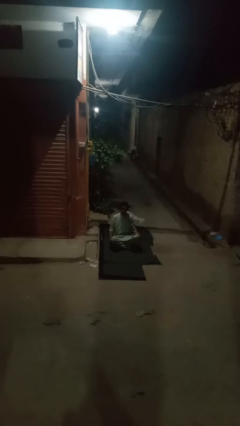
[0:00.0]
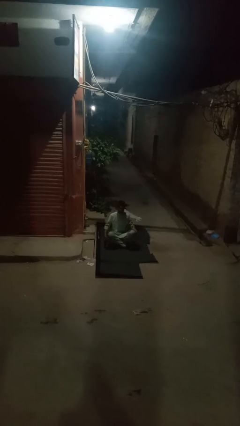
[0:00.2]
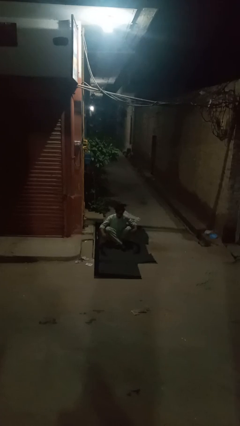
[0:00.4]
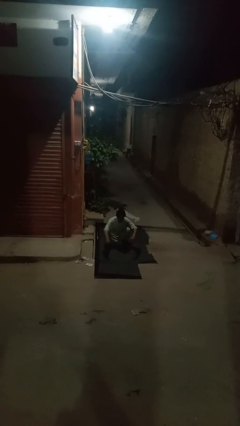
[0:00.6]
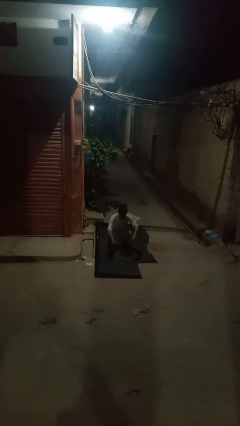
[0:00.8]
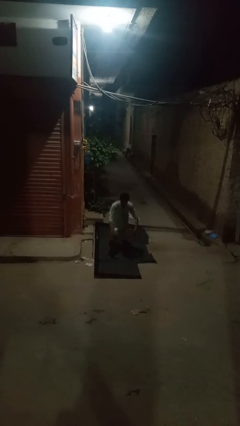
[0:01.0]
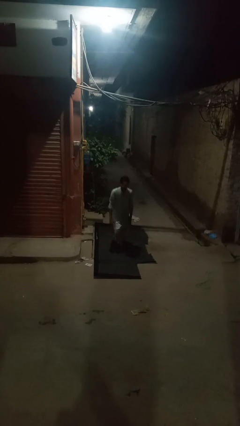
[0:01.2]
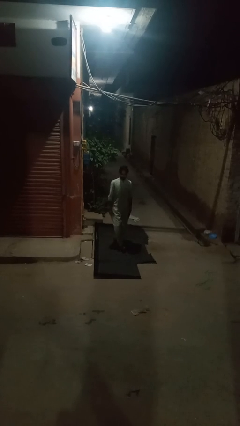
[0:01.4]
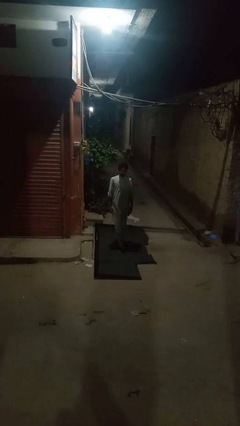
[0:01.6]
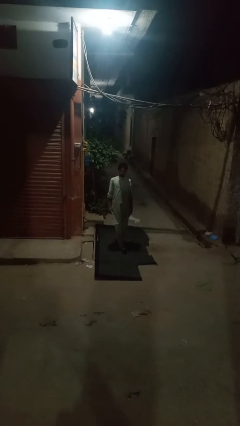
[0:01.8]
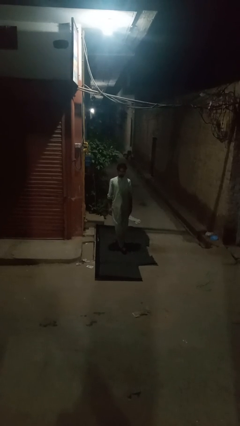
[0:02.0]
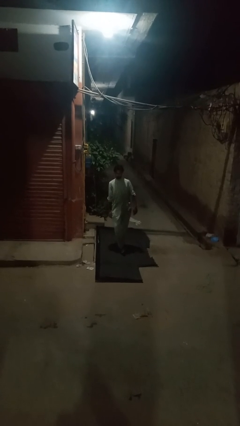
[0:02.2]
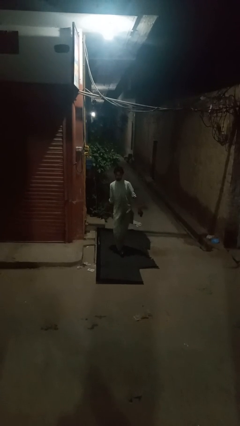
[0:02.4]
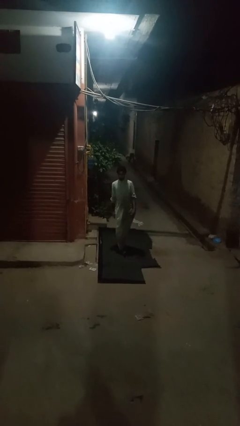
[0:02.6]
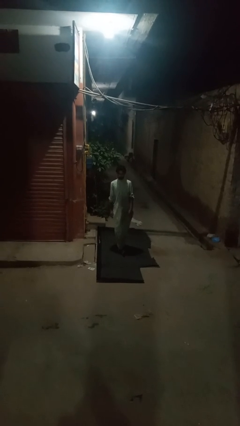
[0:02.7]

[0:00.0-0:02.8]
person stands up from floor

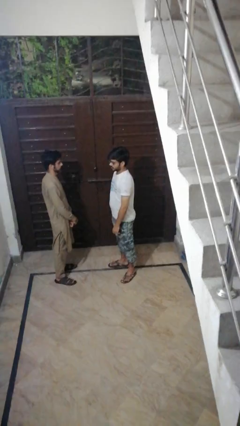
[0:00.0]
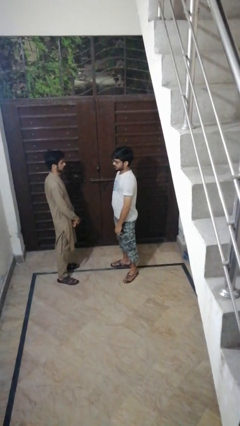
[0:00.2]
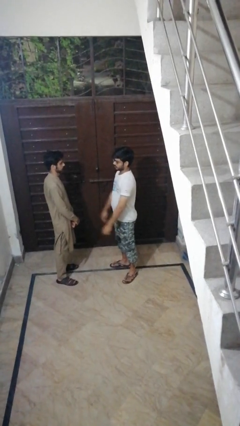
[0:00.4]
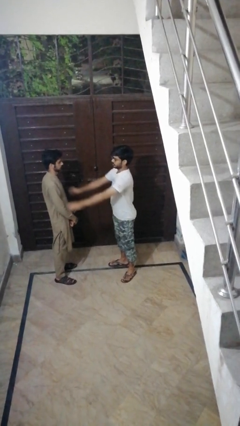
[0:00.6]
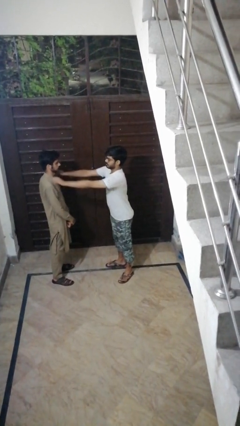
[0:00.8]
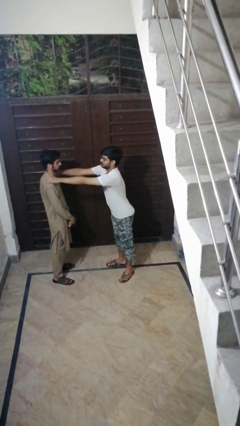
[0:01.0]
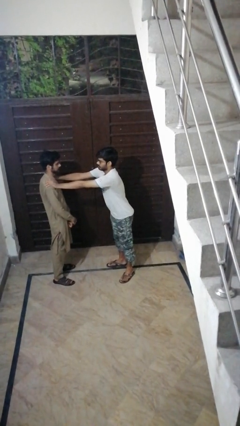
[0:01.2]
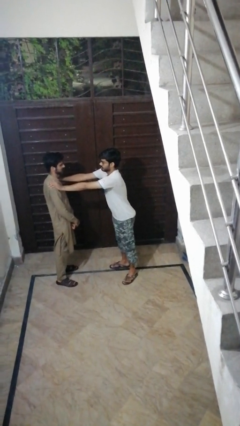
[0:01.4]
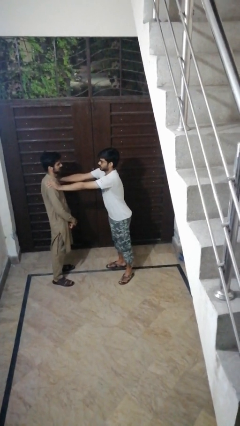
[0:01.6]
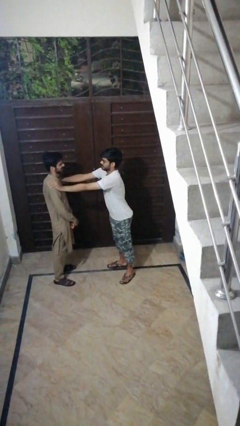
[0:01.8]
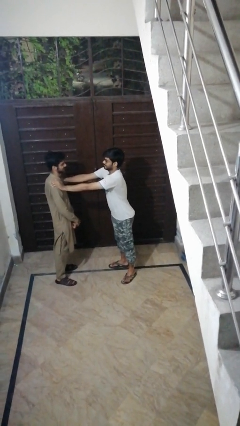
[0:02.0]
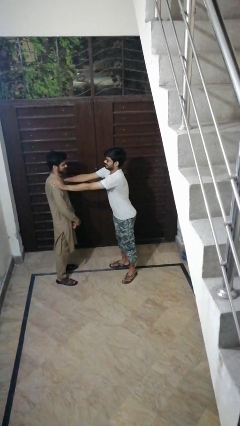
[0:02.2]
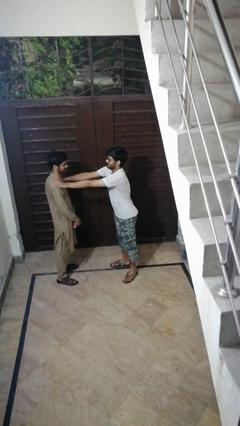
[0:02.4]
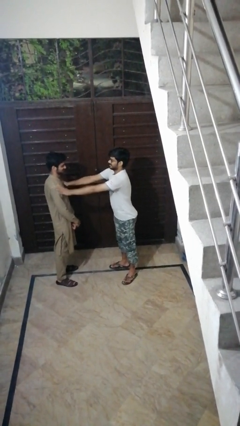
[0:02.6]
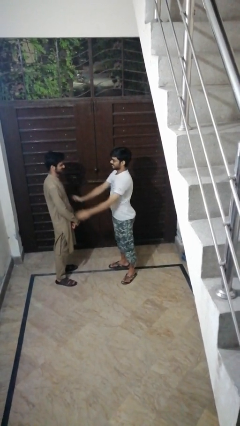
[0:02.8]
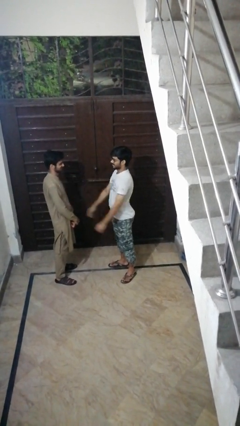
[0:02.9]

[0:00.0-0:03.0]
person pounds shoulders of person

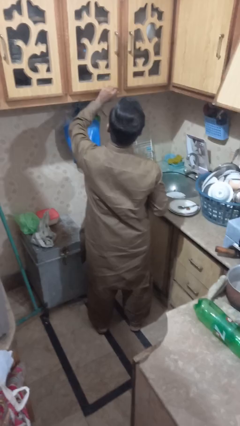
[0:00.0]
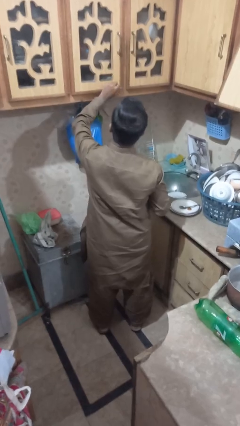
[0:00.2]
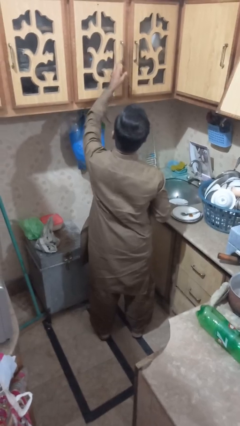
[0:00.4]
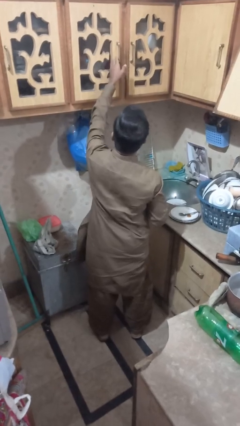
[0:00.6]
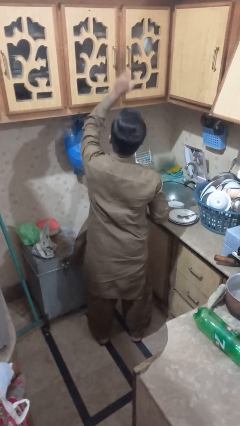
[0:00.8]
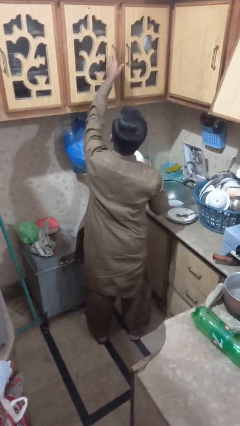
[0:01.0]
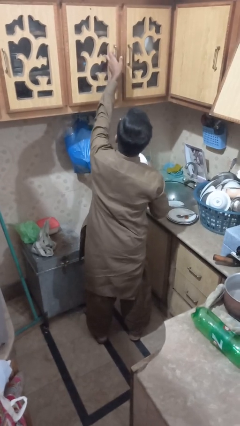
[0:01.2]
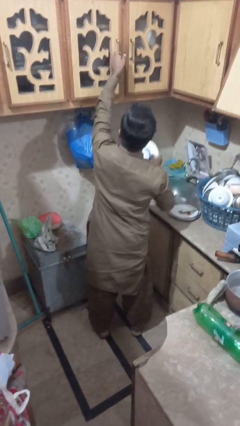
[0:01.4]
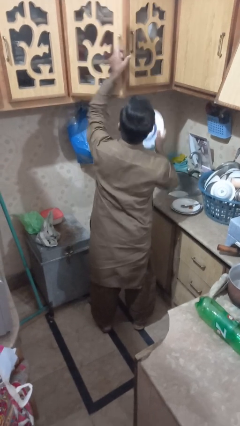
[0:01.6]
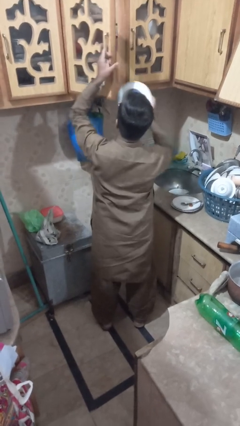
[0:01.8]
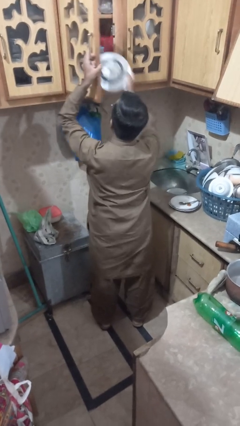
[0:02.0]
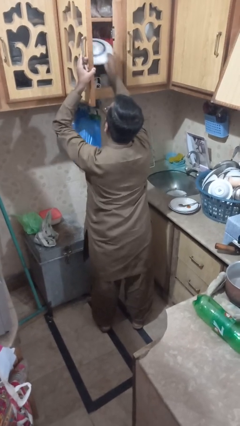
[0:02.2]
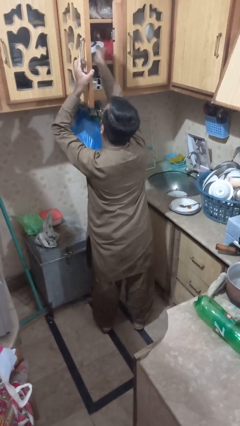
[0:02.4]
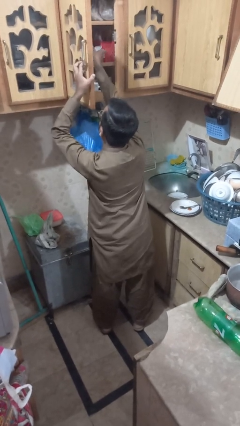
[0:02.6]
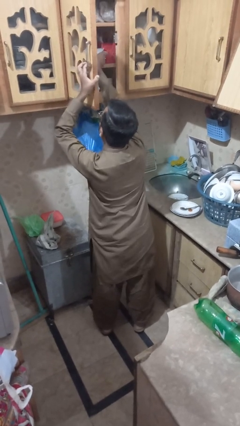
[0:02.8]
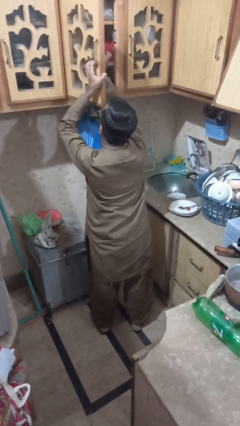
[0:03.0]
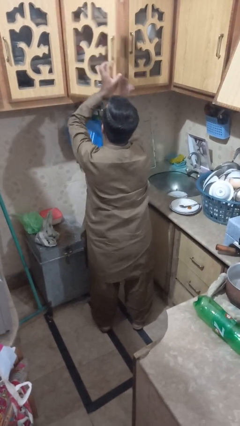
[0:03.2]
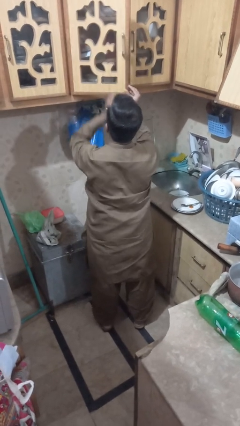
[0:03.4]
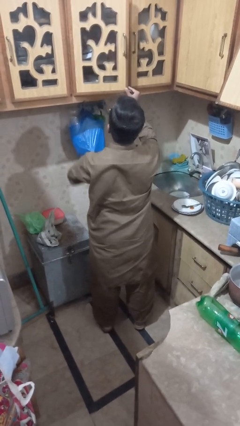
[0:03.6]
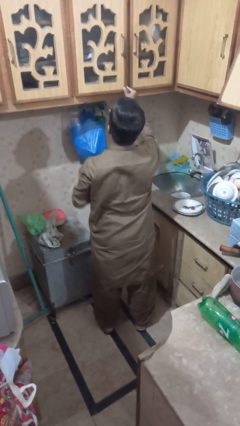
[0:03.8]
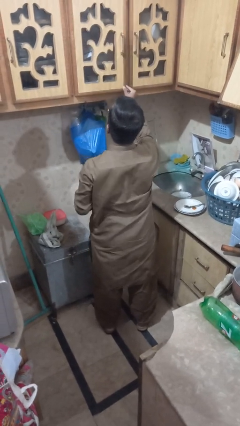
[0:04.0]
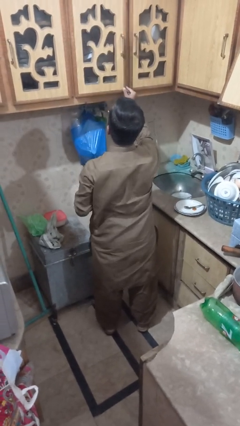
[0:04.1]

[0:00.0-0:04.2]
person puts object in cabinet

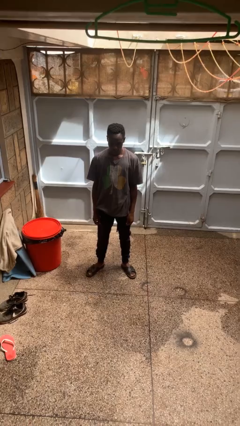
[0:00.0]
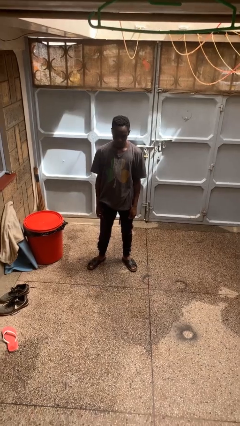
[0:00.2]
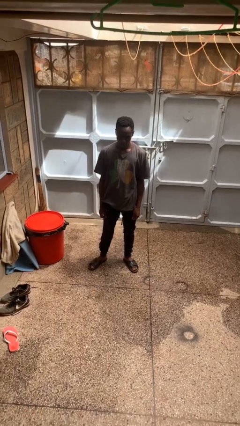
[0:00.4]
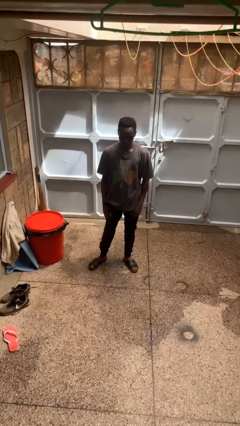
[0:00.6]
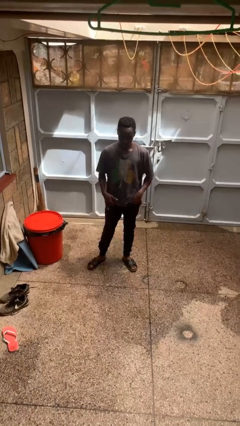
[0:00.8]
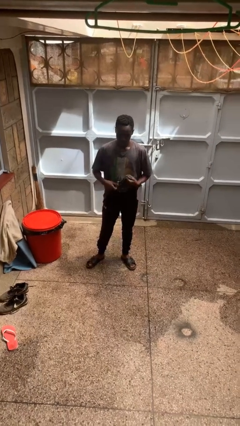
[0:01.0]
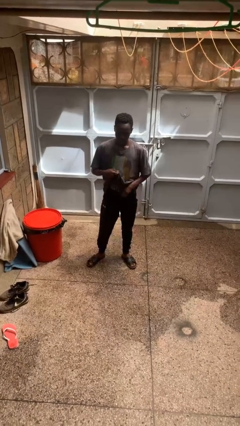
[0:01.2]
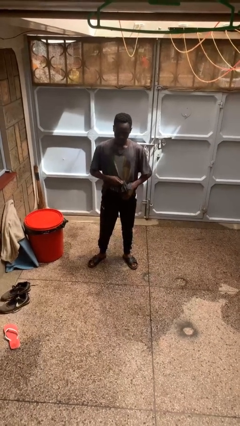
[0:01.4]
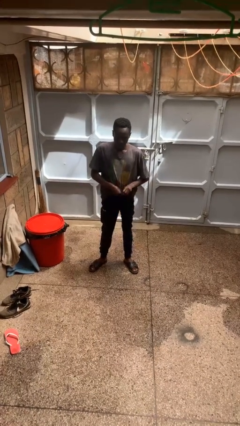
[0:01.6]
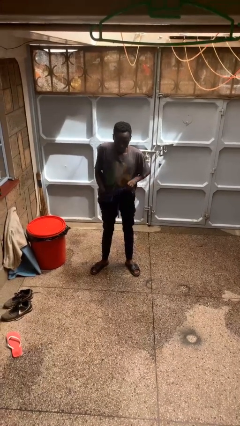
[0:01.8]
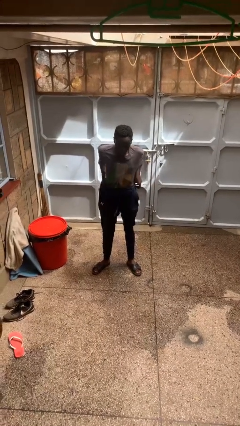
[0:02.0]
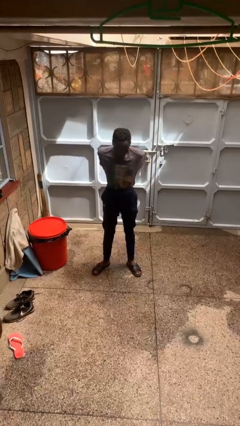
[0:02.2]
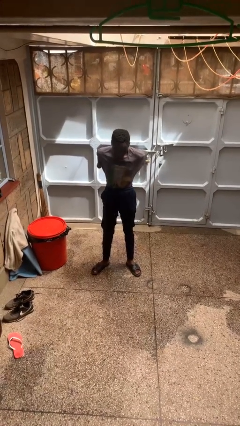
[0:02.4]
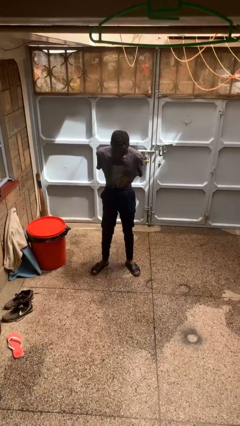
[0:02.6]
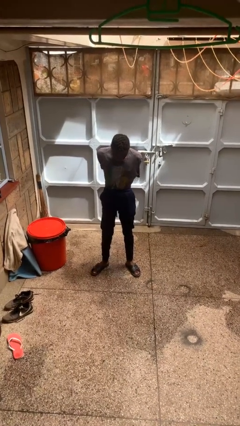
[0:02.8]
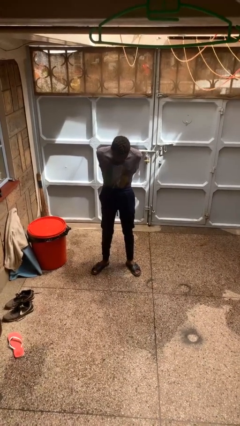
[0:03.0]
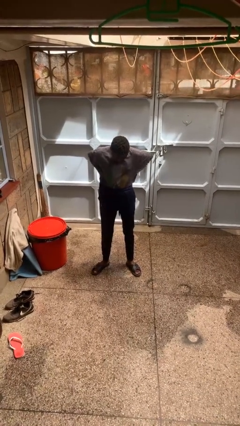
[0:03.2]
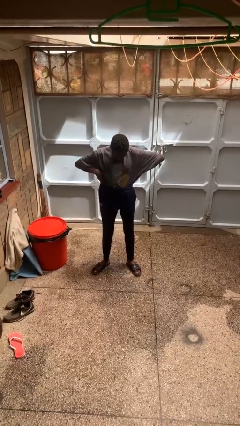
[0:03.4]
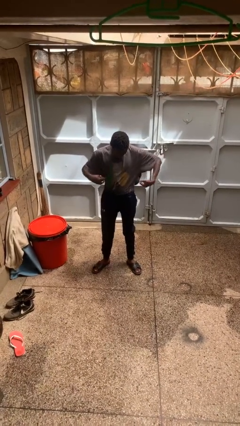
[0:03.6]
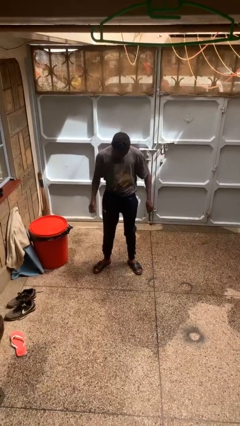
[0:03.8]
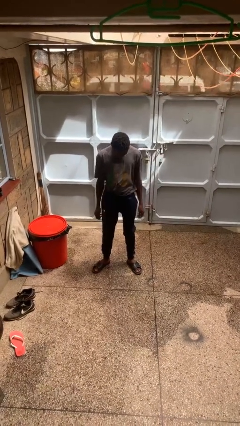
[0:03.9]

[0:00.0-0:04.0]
person tucks in shirt

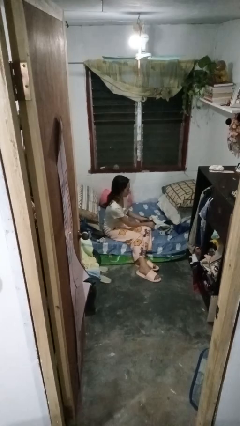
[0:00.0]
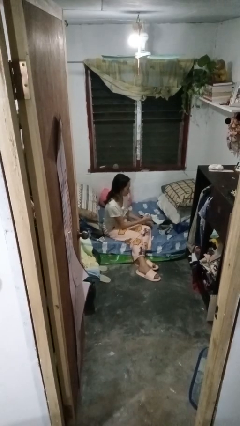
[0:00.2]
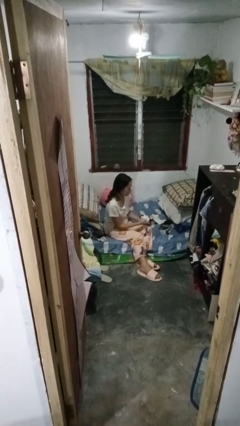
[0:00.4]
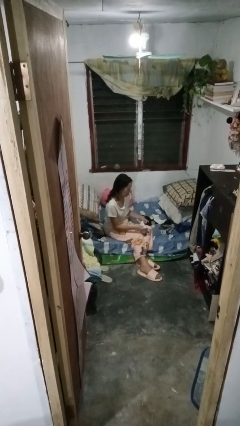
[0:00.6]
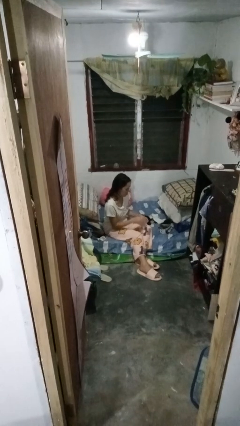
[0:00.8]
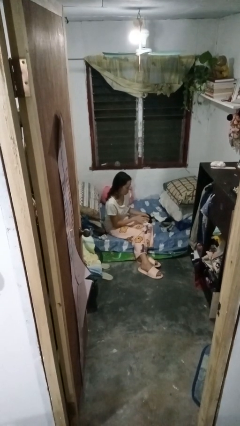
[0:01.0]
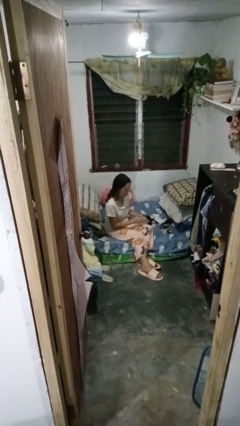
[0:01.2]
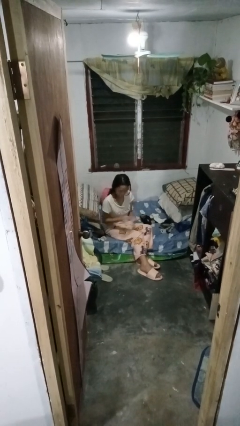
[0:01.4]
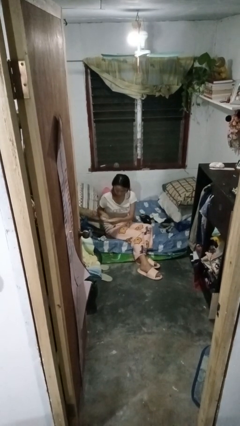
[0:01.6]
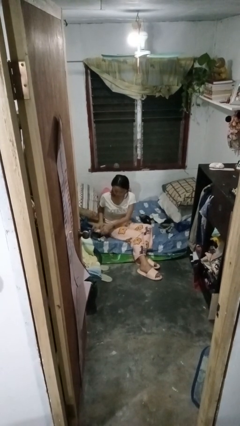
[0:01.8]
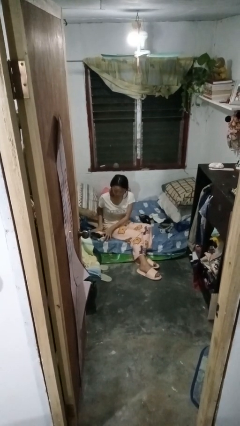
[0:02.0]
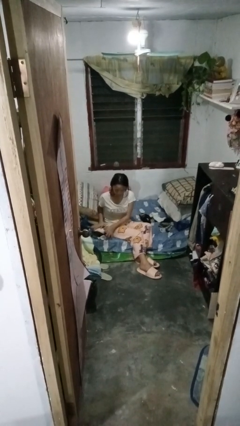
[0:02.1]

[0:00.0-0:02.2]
person folds socks

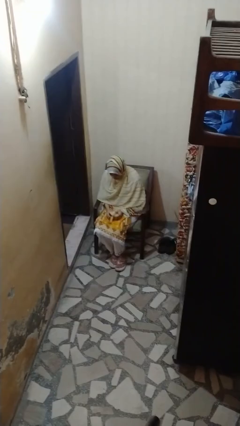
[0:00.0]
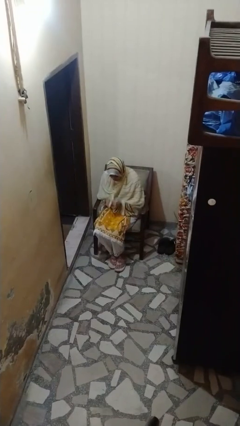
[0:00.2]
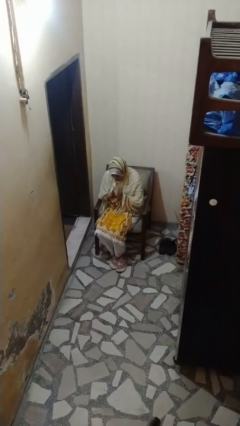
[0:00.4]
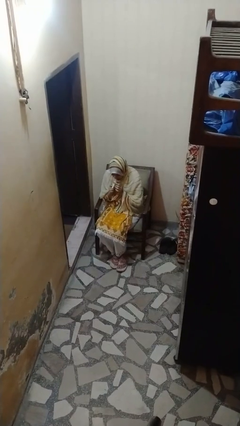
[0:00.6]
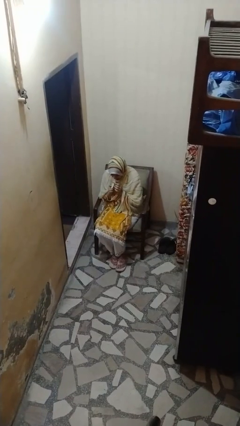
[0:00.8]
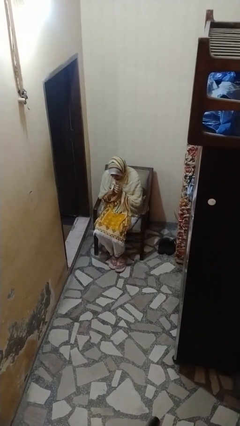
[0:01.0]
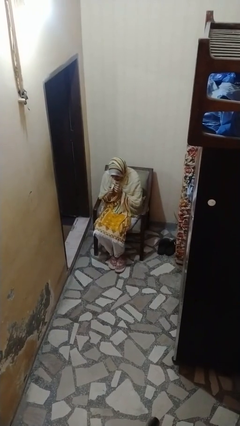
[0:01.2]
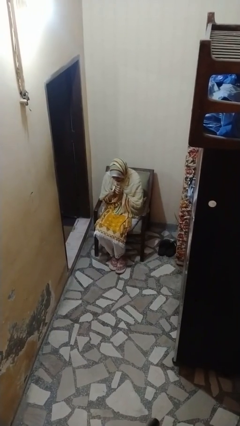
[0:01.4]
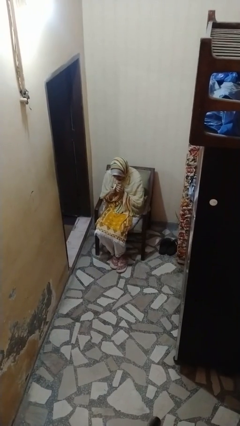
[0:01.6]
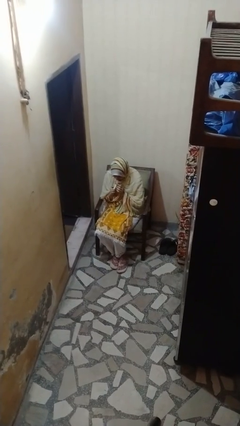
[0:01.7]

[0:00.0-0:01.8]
person eats banana
